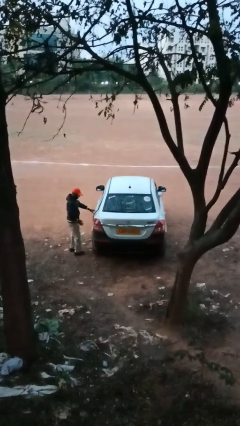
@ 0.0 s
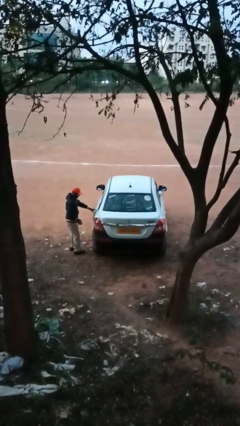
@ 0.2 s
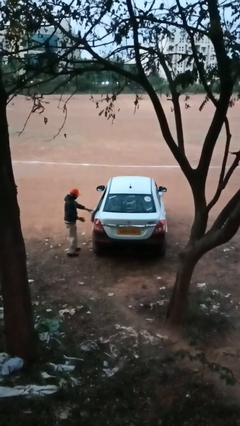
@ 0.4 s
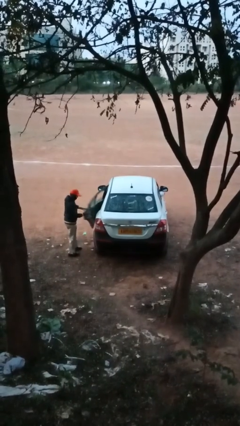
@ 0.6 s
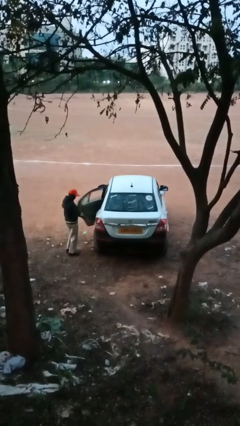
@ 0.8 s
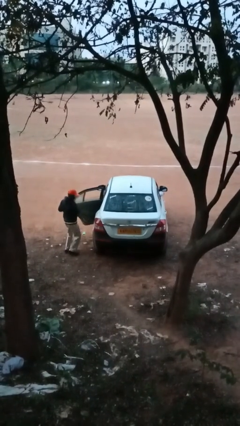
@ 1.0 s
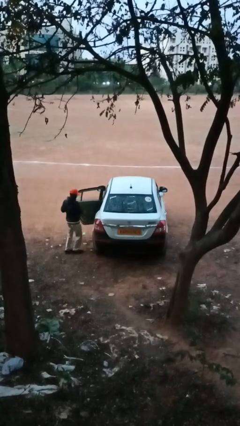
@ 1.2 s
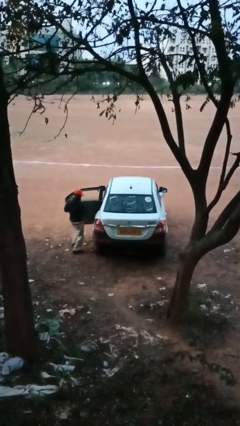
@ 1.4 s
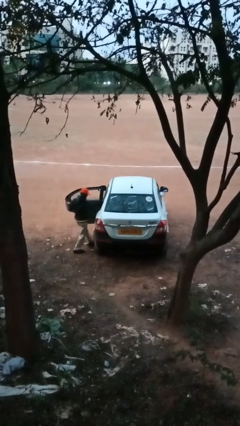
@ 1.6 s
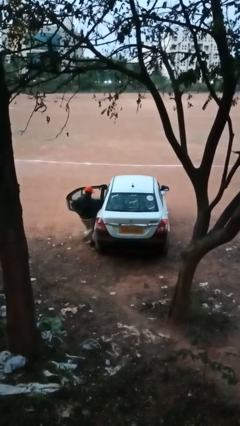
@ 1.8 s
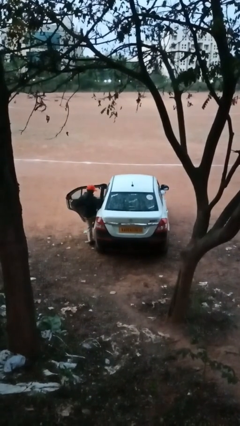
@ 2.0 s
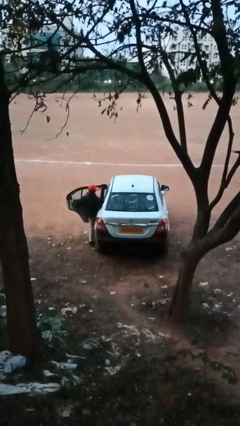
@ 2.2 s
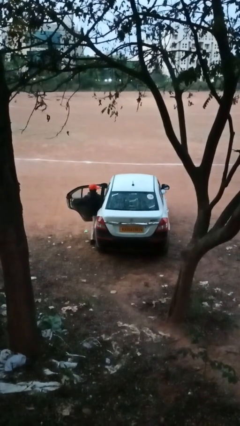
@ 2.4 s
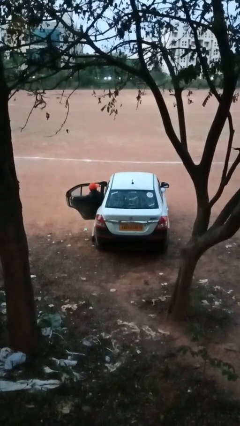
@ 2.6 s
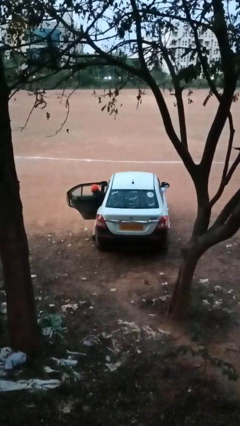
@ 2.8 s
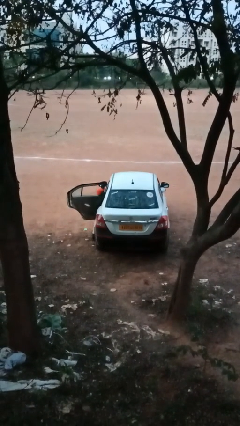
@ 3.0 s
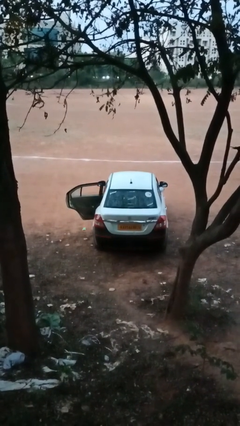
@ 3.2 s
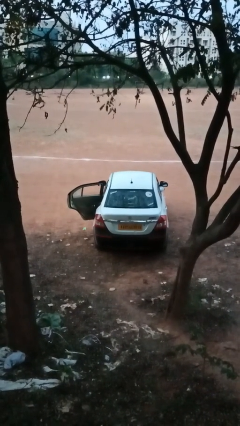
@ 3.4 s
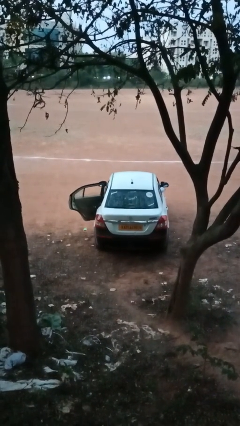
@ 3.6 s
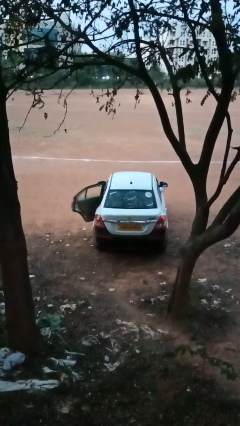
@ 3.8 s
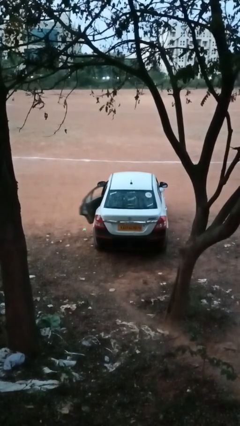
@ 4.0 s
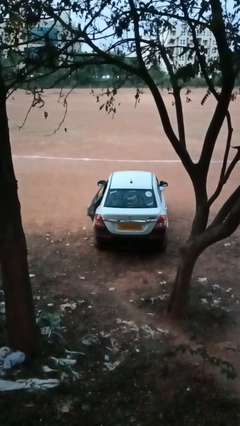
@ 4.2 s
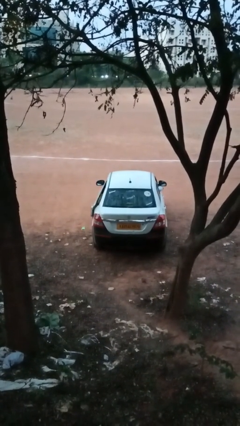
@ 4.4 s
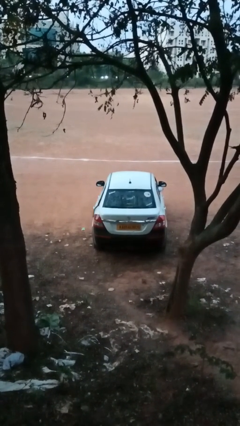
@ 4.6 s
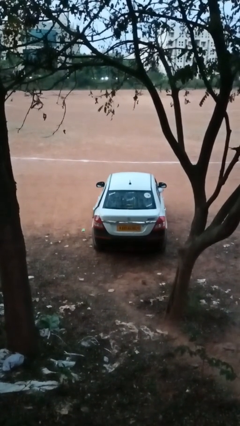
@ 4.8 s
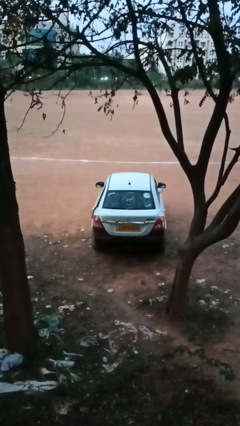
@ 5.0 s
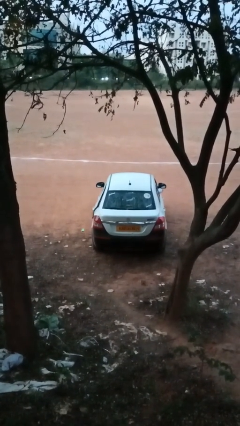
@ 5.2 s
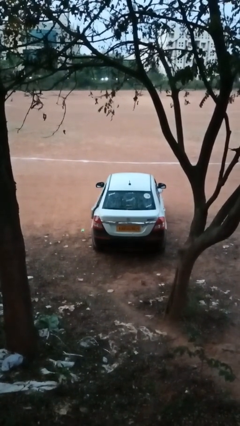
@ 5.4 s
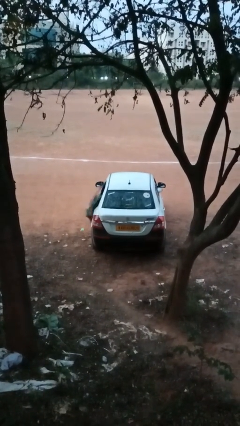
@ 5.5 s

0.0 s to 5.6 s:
car picks up person

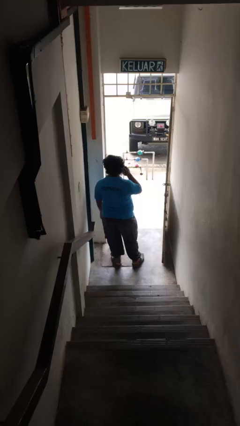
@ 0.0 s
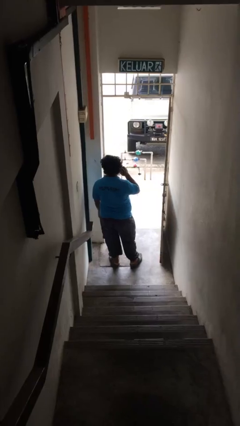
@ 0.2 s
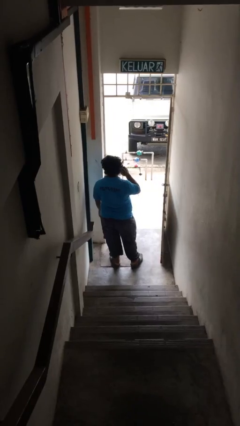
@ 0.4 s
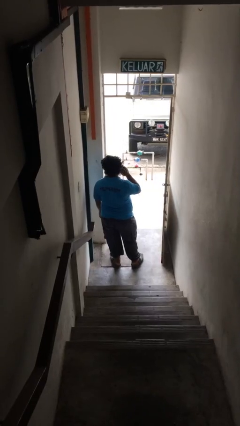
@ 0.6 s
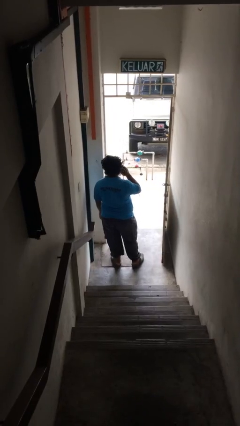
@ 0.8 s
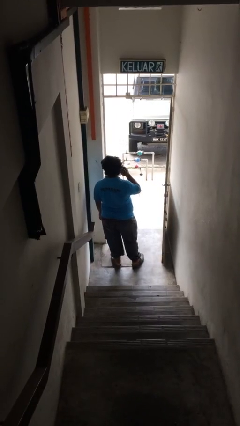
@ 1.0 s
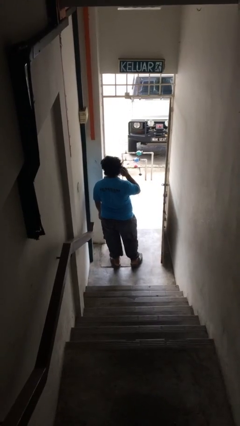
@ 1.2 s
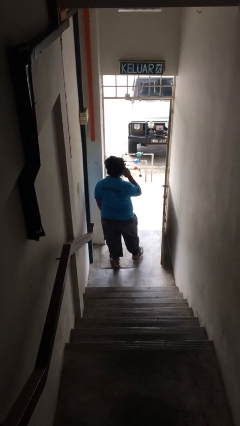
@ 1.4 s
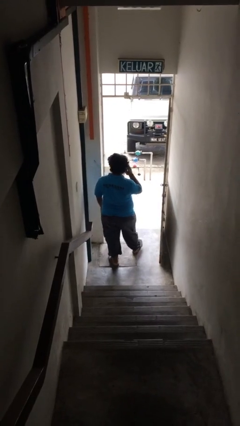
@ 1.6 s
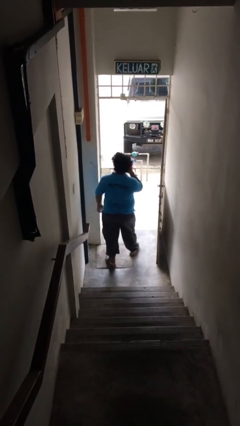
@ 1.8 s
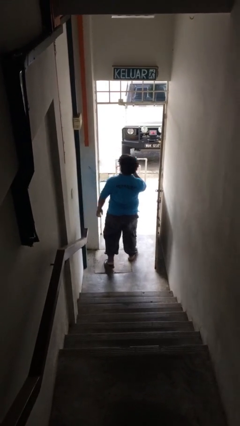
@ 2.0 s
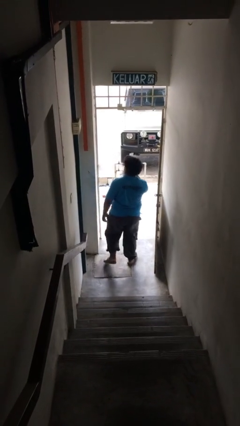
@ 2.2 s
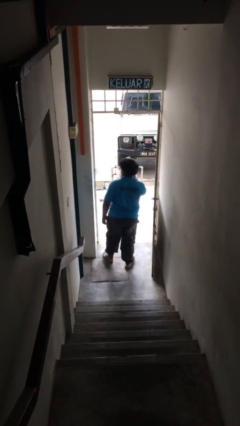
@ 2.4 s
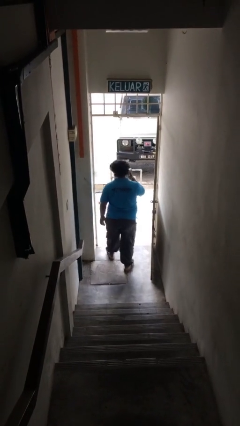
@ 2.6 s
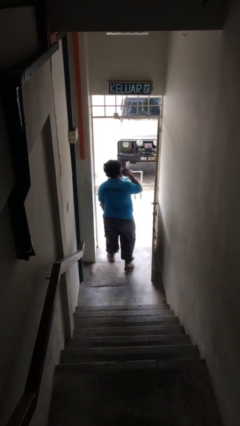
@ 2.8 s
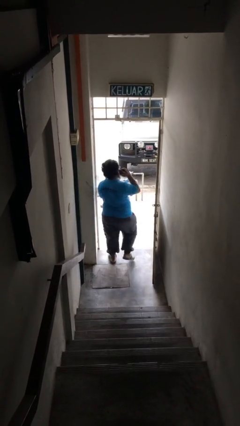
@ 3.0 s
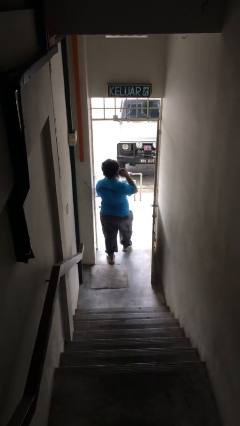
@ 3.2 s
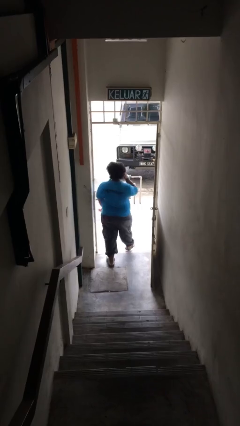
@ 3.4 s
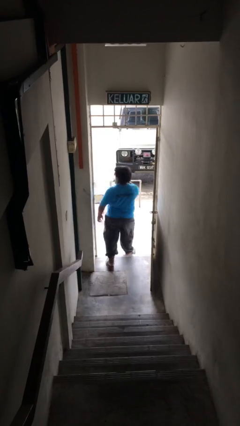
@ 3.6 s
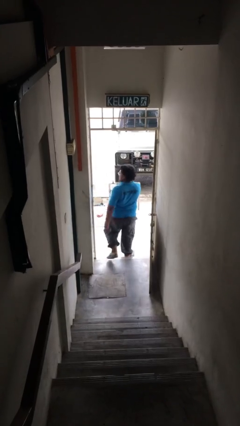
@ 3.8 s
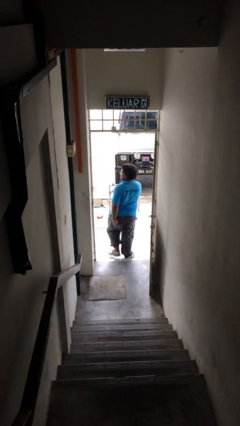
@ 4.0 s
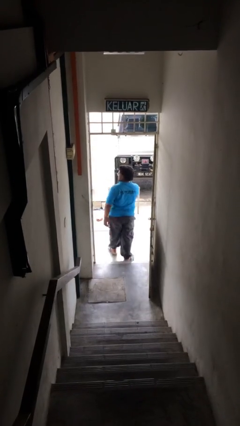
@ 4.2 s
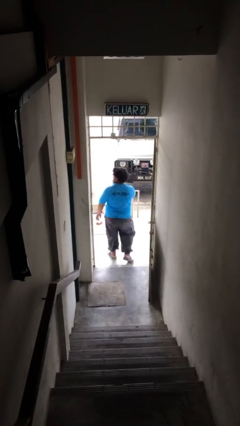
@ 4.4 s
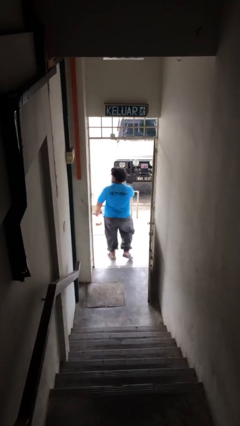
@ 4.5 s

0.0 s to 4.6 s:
person exits scene through structure

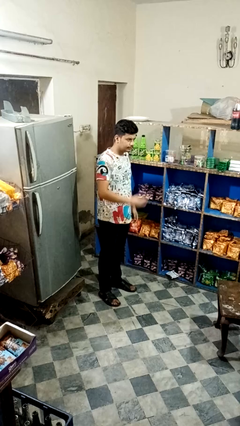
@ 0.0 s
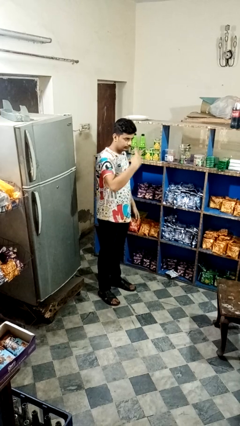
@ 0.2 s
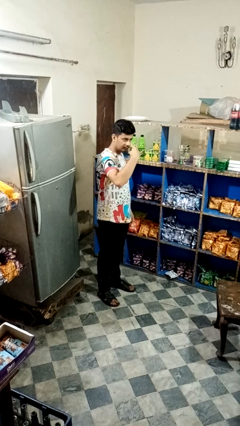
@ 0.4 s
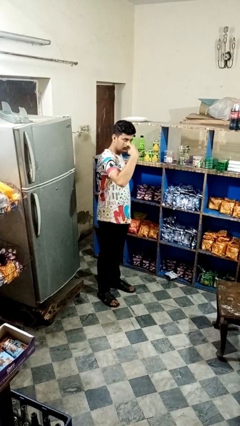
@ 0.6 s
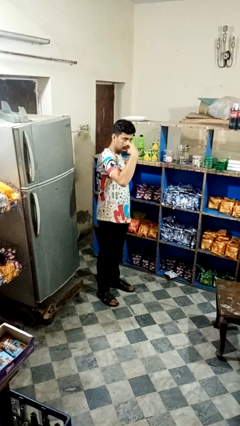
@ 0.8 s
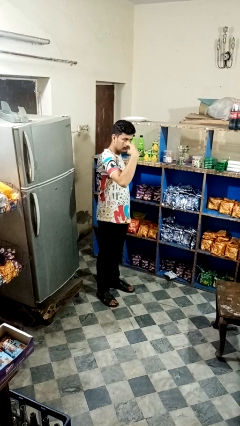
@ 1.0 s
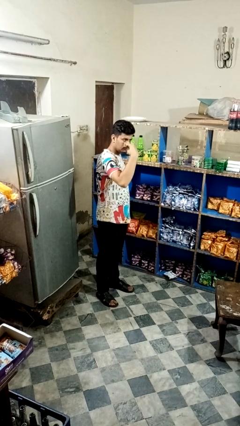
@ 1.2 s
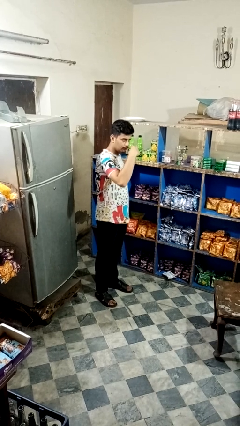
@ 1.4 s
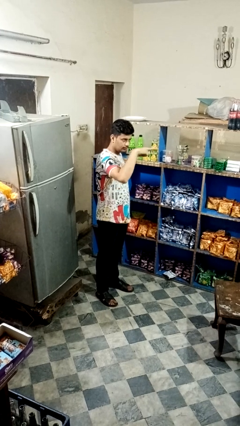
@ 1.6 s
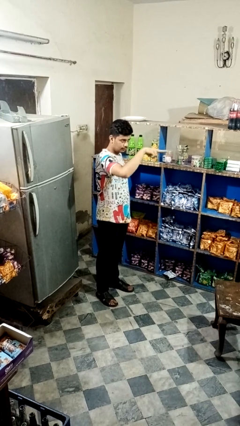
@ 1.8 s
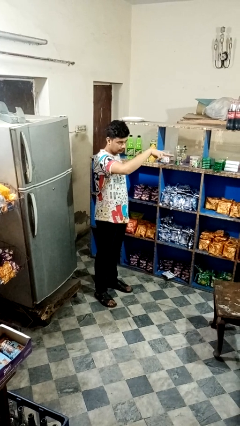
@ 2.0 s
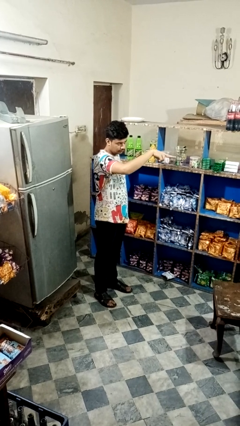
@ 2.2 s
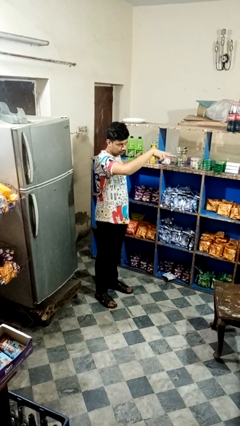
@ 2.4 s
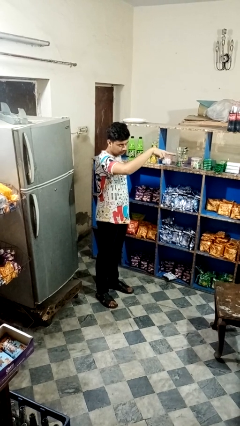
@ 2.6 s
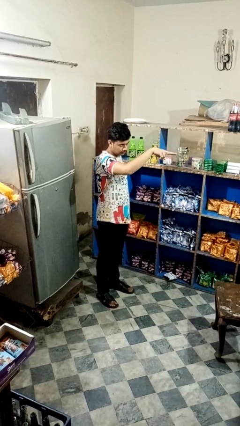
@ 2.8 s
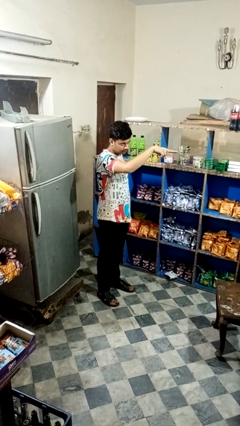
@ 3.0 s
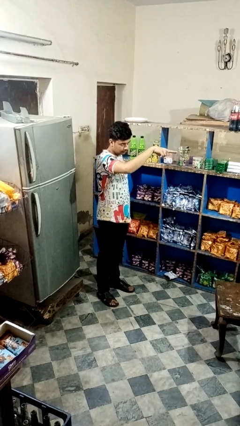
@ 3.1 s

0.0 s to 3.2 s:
person gestures watch closely

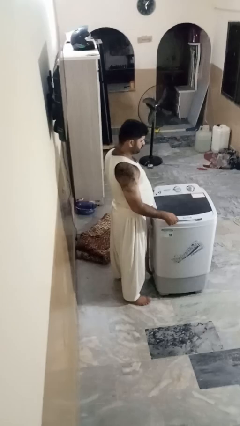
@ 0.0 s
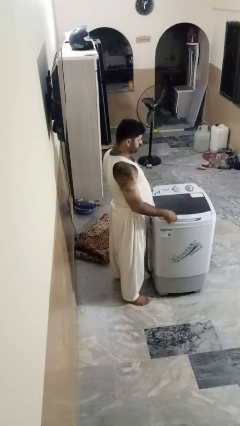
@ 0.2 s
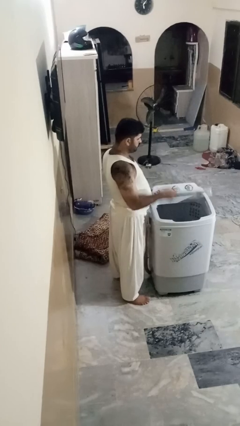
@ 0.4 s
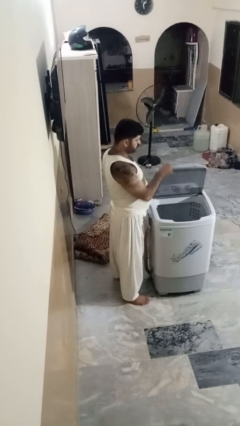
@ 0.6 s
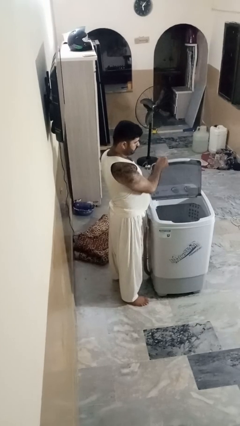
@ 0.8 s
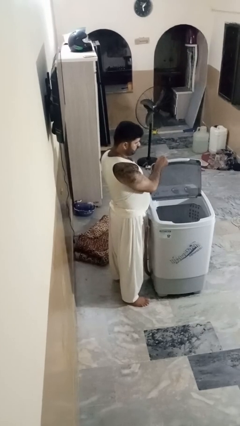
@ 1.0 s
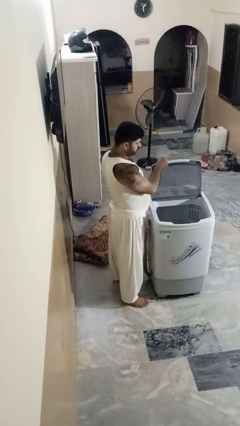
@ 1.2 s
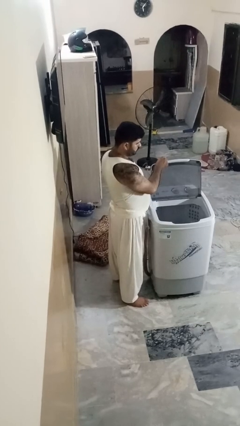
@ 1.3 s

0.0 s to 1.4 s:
person opens clothes washer

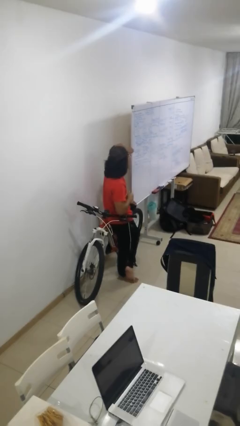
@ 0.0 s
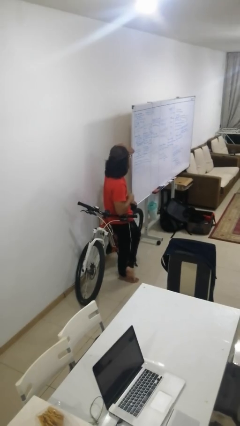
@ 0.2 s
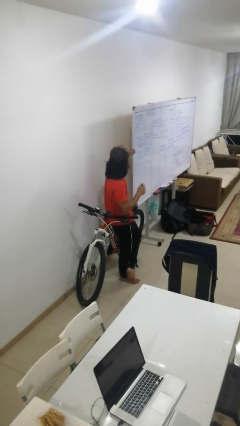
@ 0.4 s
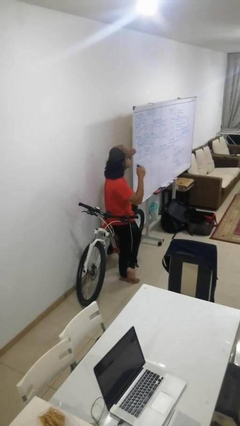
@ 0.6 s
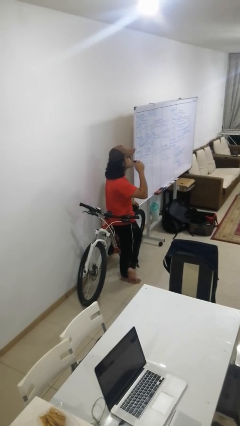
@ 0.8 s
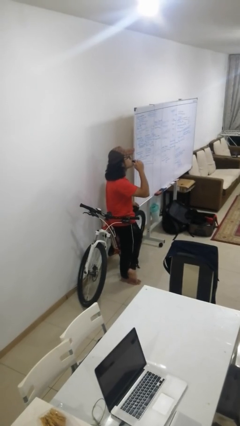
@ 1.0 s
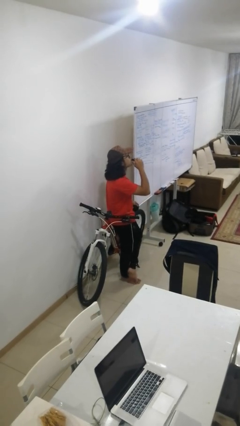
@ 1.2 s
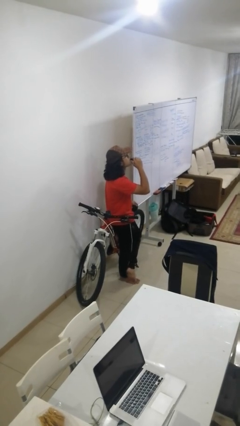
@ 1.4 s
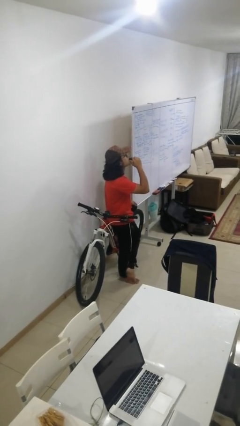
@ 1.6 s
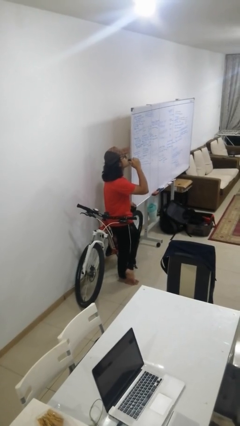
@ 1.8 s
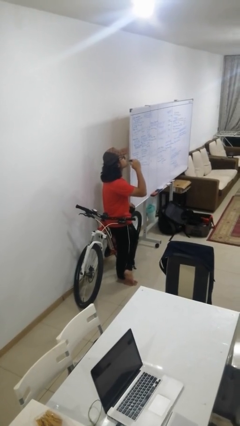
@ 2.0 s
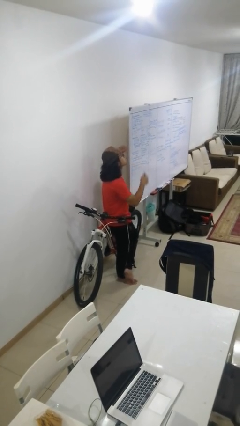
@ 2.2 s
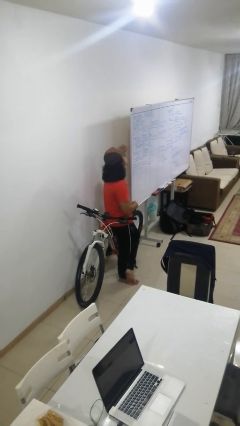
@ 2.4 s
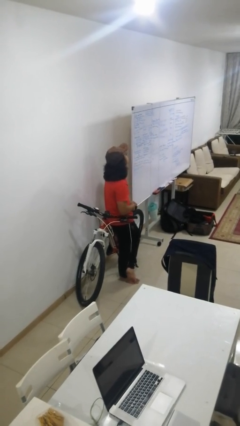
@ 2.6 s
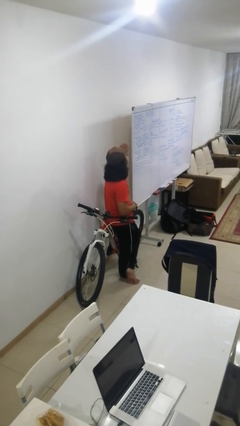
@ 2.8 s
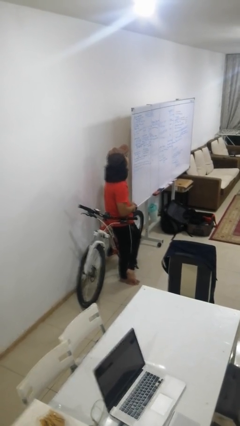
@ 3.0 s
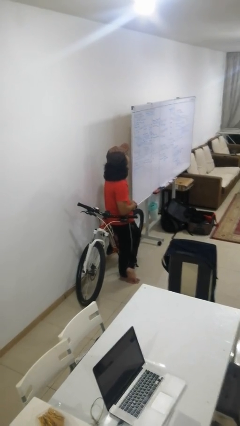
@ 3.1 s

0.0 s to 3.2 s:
person vapes
